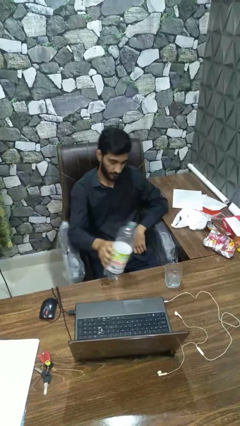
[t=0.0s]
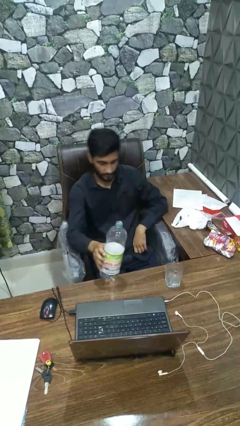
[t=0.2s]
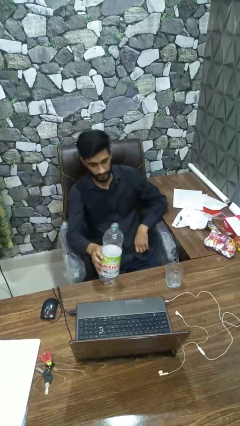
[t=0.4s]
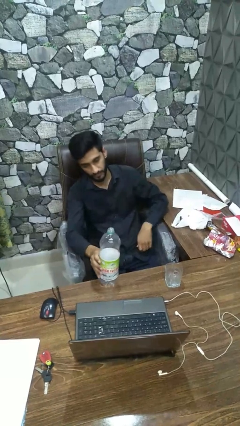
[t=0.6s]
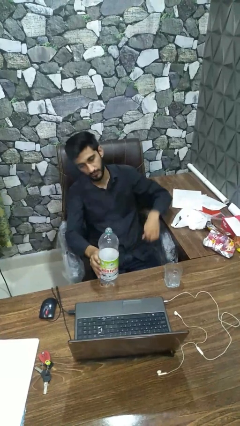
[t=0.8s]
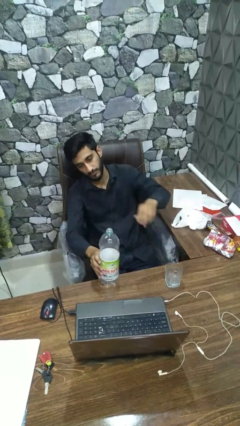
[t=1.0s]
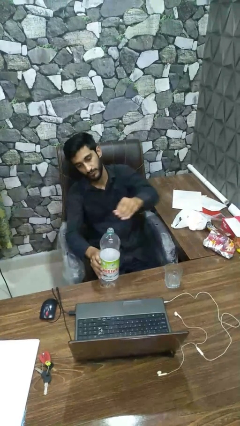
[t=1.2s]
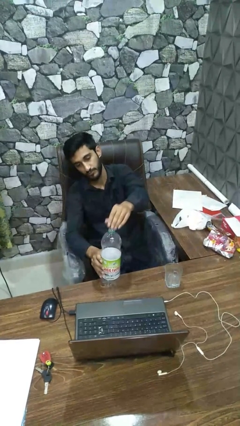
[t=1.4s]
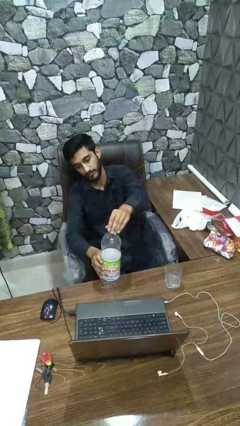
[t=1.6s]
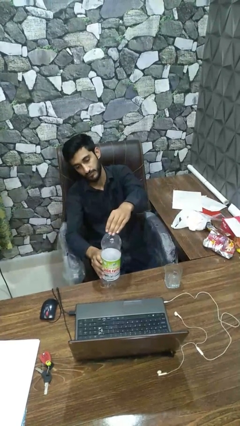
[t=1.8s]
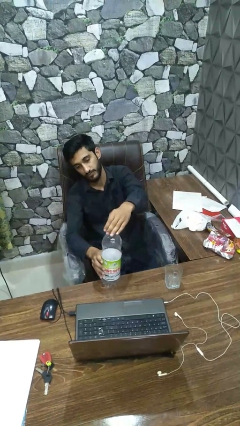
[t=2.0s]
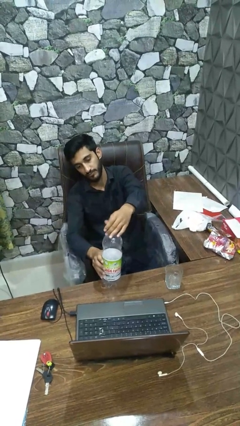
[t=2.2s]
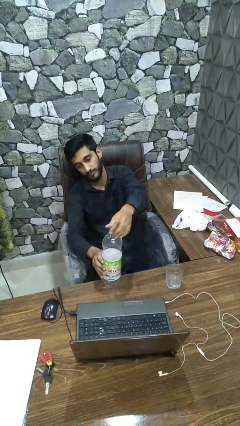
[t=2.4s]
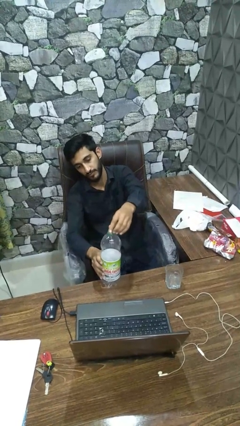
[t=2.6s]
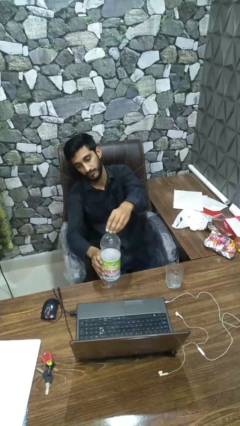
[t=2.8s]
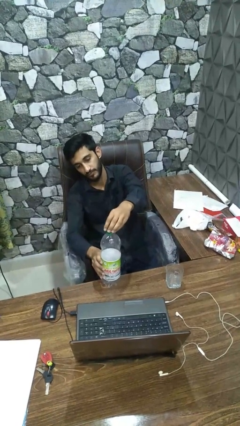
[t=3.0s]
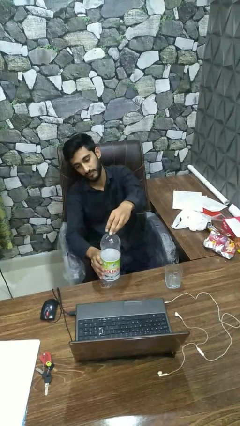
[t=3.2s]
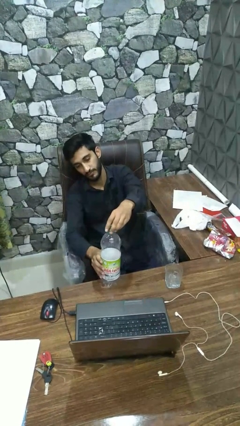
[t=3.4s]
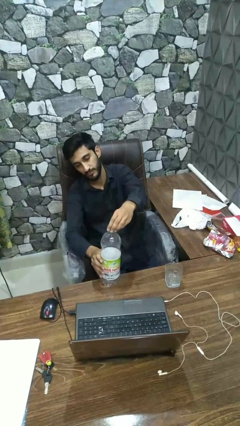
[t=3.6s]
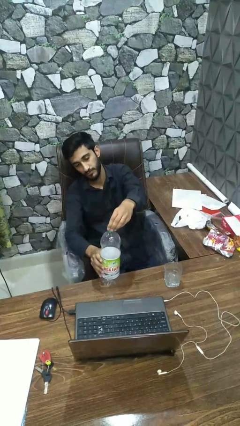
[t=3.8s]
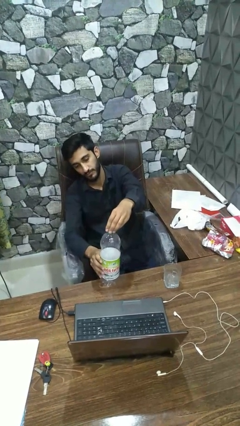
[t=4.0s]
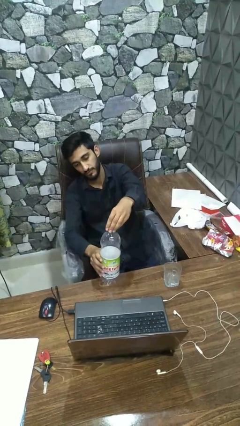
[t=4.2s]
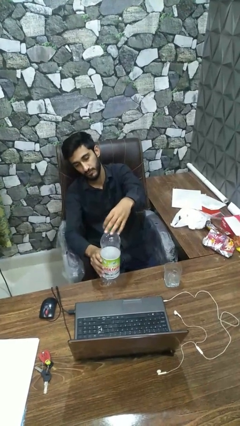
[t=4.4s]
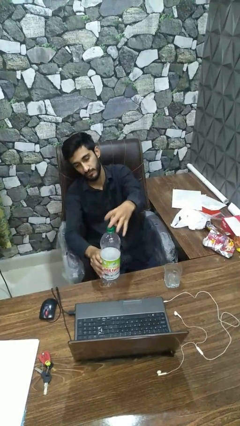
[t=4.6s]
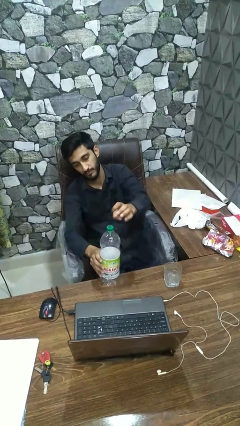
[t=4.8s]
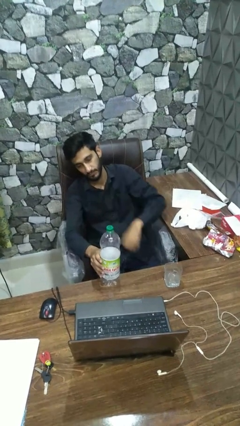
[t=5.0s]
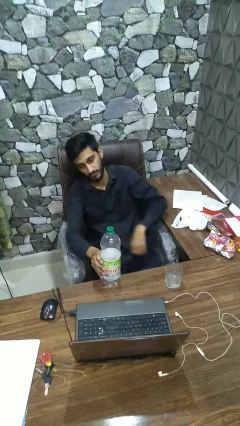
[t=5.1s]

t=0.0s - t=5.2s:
person screws lid to bottle

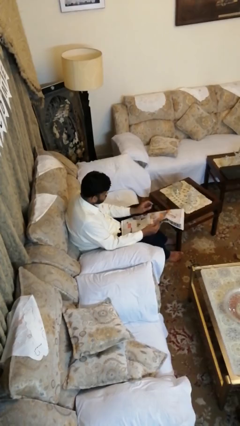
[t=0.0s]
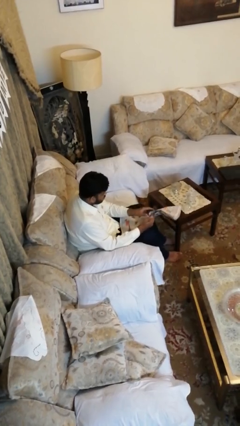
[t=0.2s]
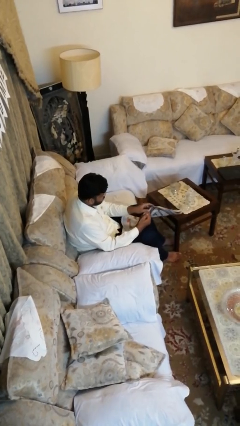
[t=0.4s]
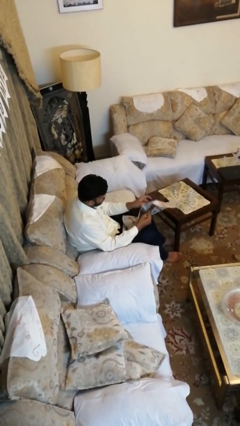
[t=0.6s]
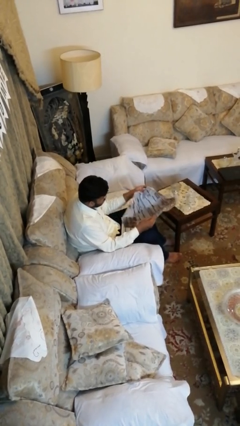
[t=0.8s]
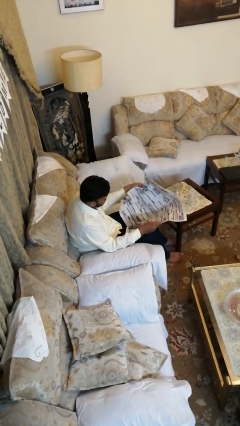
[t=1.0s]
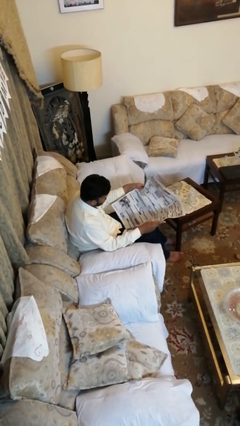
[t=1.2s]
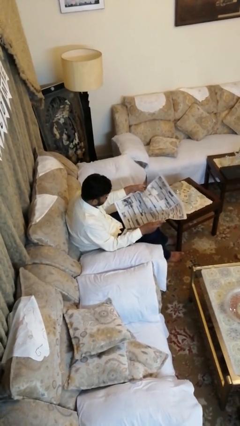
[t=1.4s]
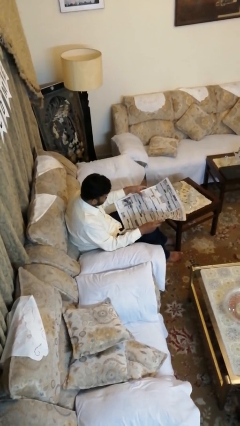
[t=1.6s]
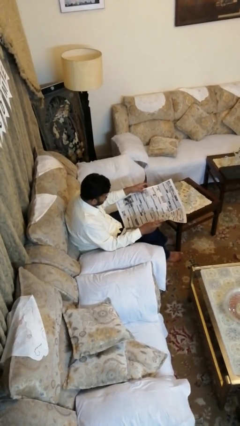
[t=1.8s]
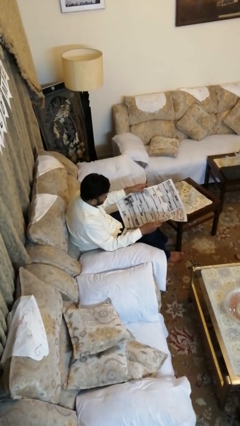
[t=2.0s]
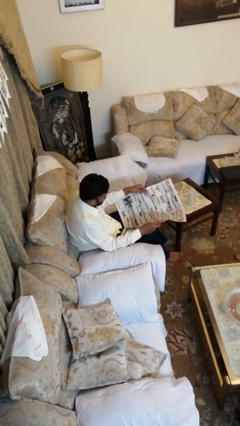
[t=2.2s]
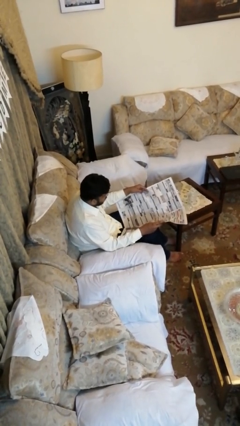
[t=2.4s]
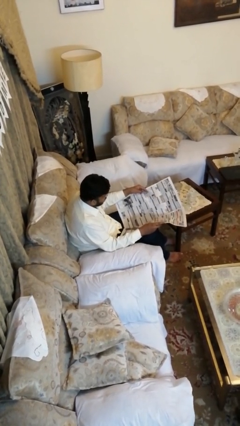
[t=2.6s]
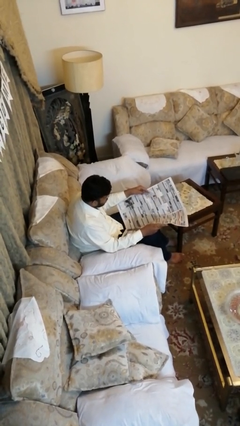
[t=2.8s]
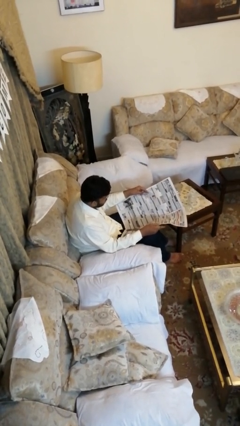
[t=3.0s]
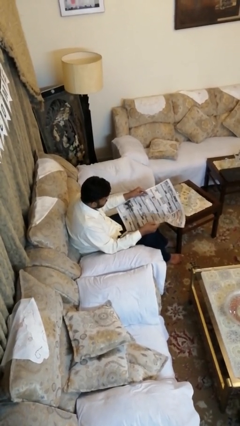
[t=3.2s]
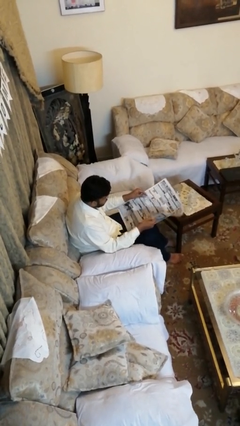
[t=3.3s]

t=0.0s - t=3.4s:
person reads newspaper

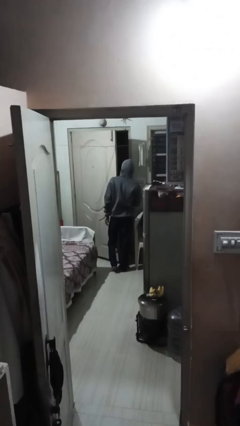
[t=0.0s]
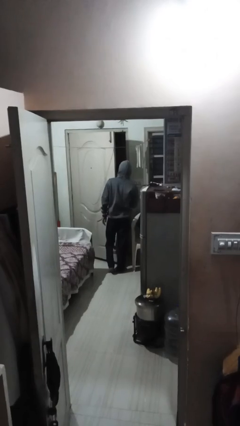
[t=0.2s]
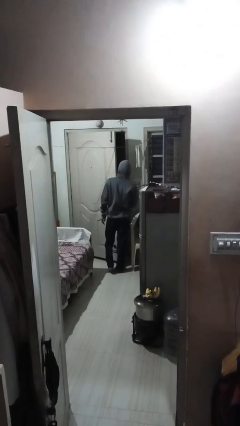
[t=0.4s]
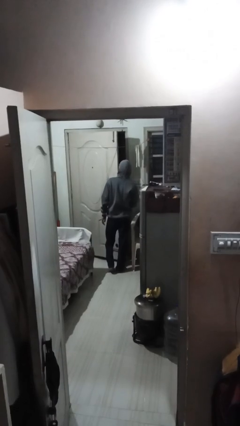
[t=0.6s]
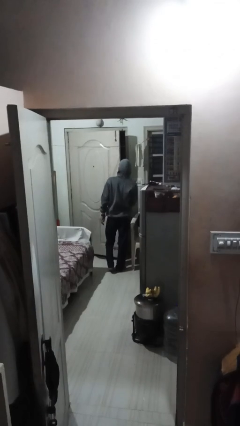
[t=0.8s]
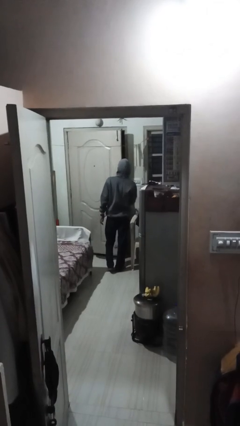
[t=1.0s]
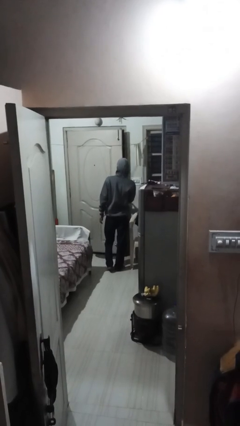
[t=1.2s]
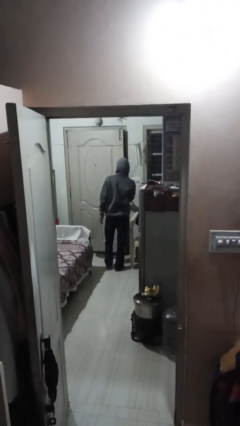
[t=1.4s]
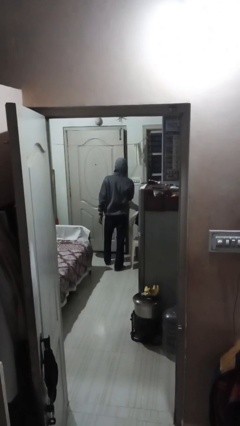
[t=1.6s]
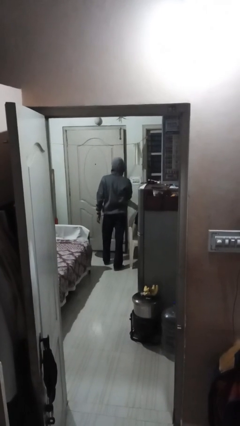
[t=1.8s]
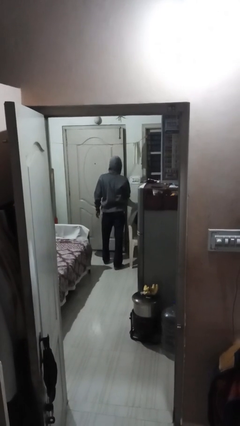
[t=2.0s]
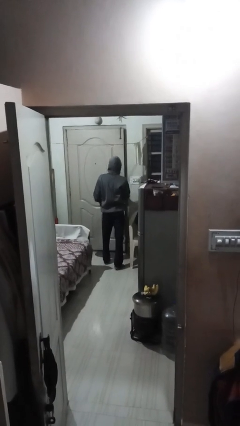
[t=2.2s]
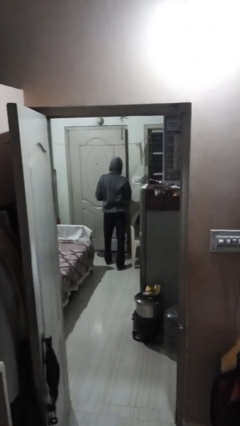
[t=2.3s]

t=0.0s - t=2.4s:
person closes facility door

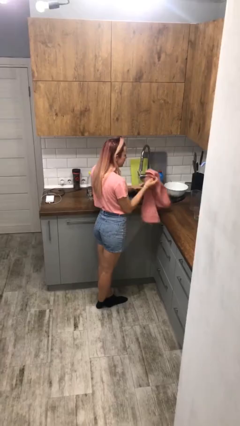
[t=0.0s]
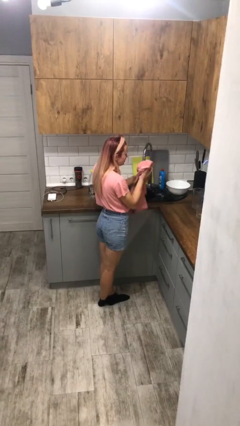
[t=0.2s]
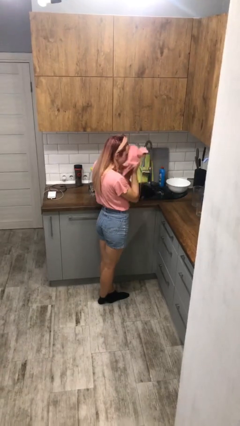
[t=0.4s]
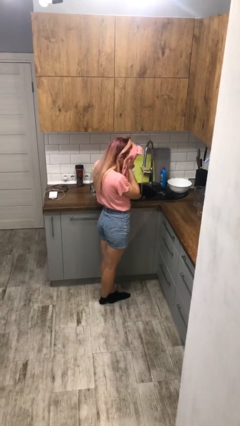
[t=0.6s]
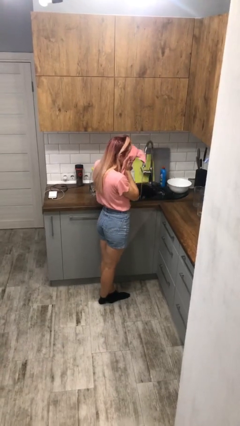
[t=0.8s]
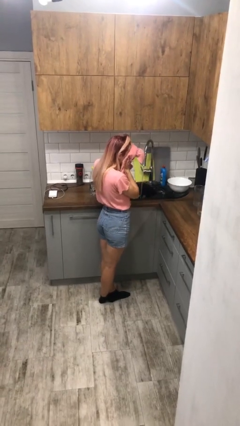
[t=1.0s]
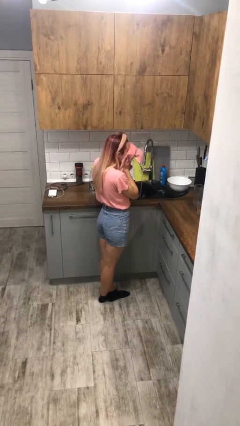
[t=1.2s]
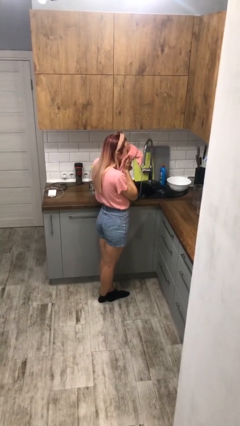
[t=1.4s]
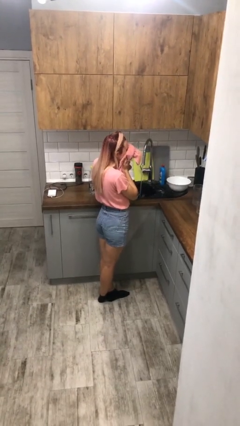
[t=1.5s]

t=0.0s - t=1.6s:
person dries face with towel

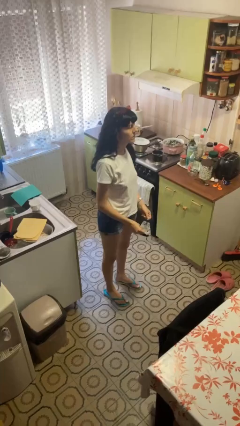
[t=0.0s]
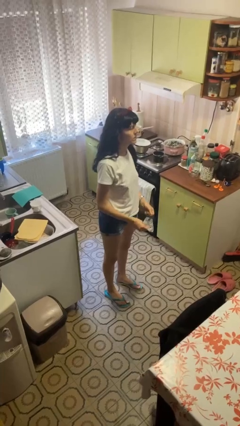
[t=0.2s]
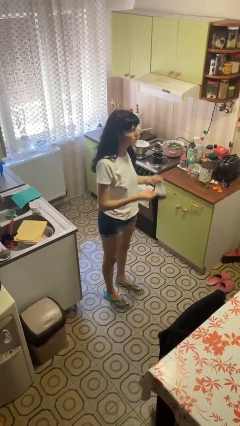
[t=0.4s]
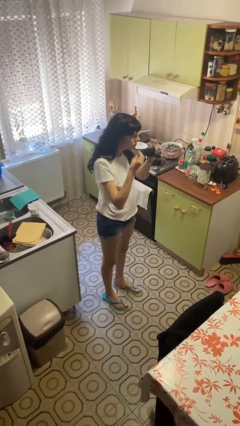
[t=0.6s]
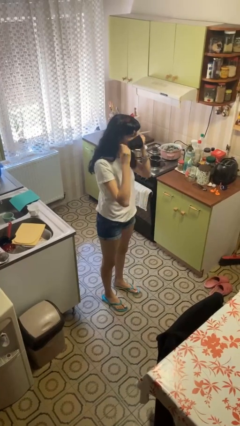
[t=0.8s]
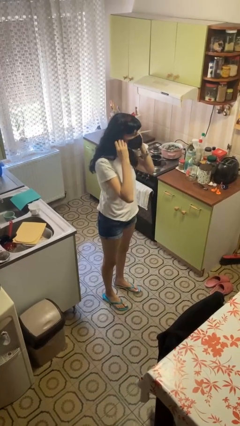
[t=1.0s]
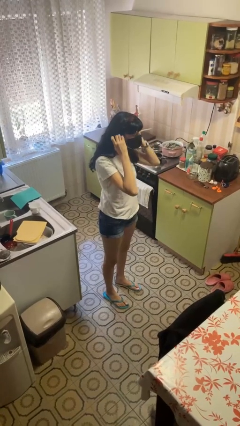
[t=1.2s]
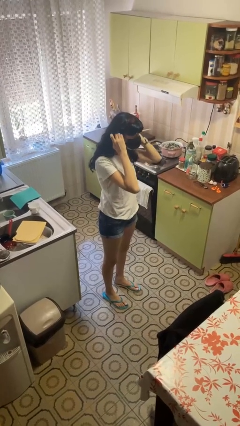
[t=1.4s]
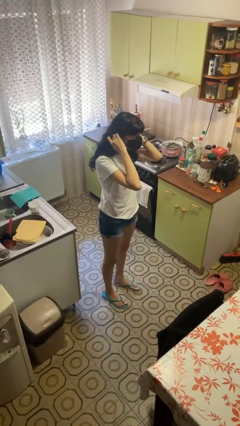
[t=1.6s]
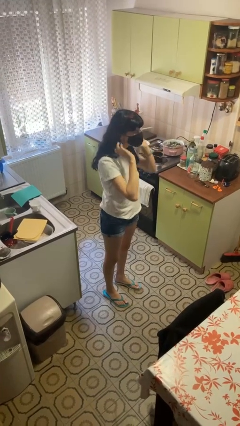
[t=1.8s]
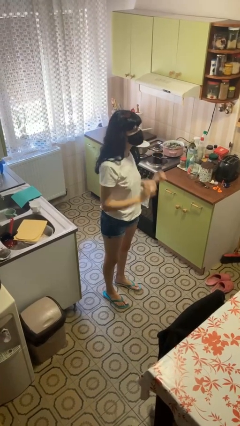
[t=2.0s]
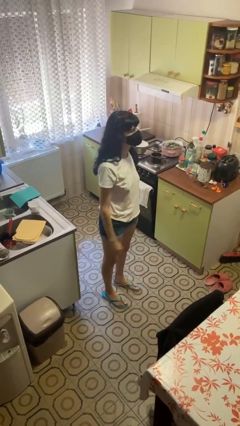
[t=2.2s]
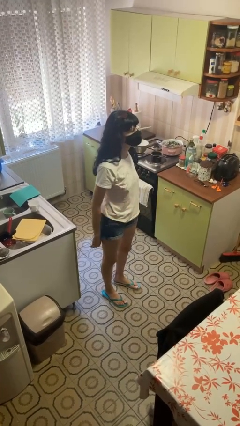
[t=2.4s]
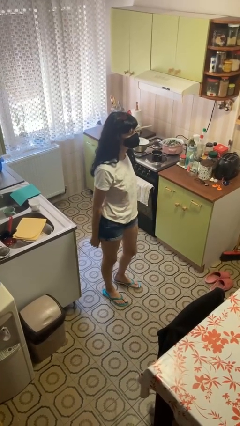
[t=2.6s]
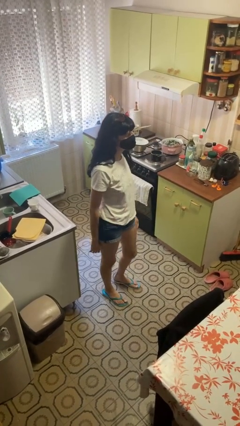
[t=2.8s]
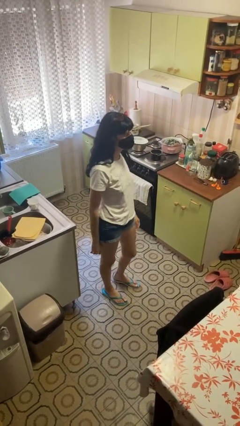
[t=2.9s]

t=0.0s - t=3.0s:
person puts on facemask

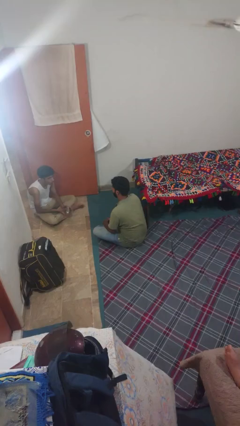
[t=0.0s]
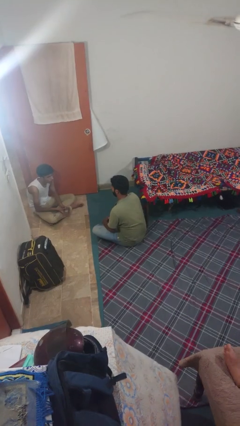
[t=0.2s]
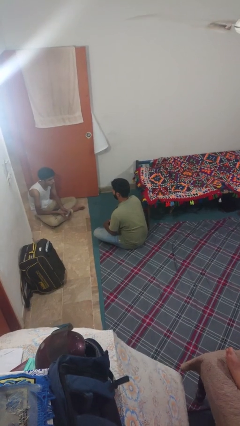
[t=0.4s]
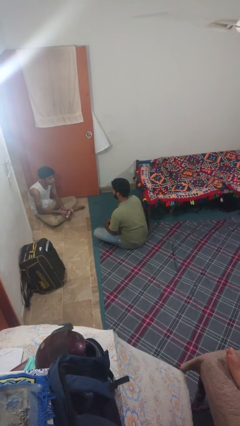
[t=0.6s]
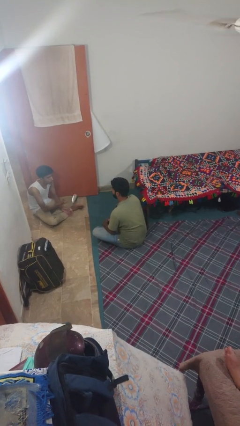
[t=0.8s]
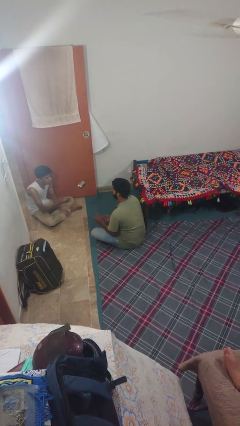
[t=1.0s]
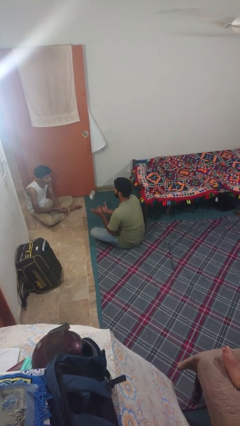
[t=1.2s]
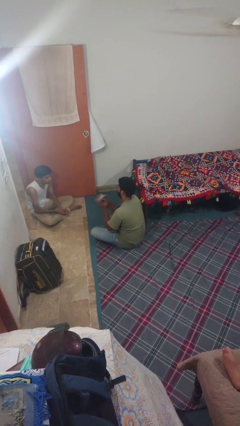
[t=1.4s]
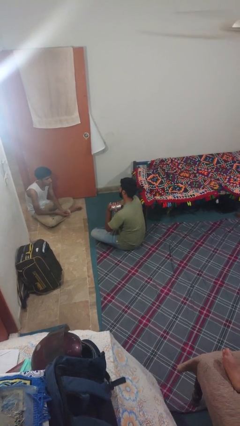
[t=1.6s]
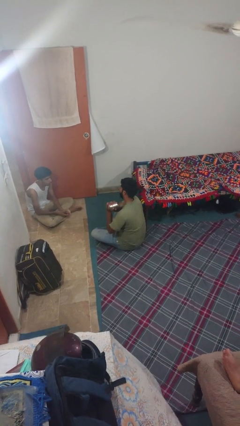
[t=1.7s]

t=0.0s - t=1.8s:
person catches object from person
